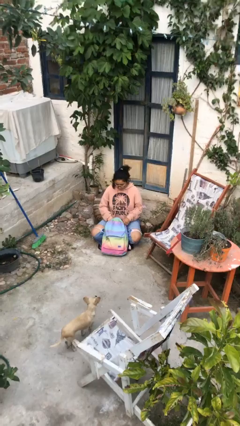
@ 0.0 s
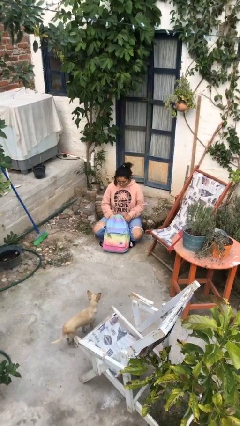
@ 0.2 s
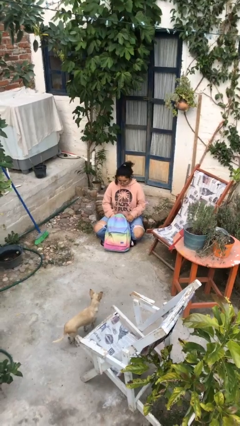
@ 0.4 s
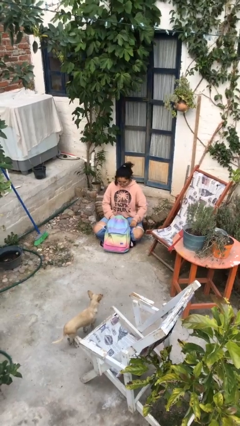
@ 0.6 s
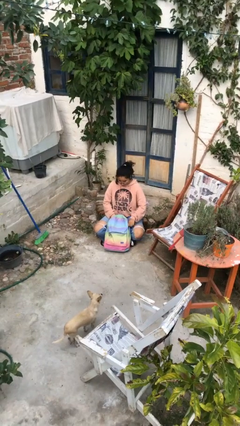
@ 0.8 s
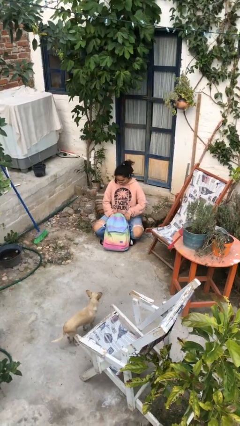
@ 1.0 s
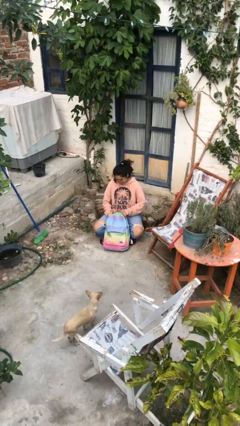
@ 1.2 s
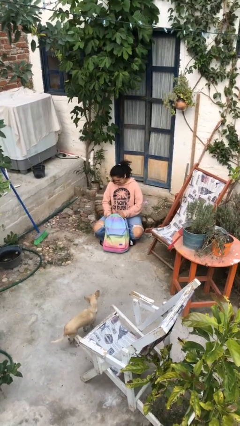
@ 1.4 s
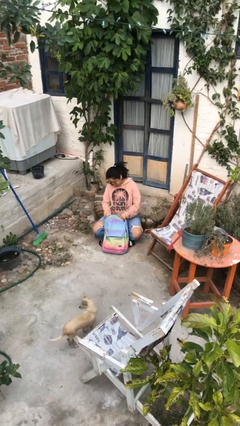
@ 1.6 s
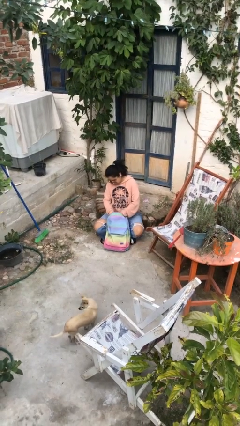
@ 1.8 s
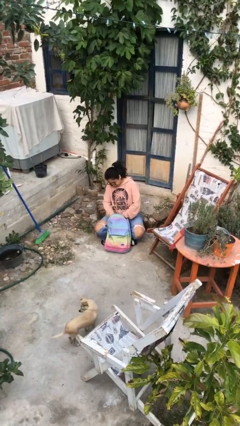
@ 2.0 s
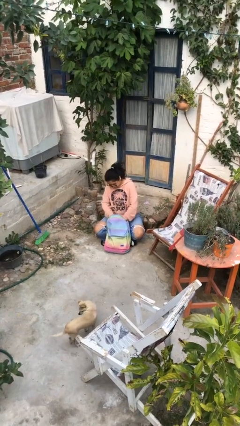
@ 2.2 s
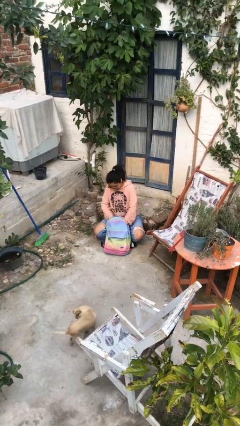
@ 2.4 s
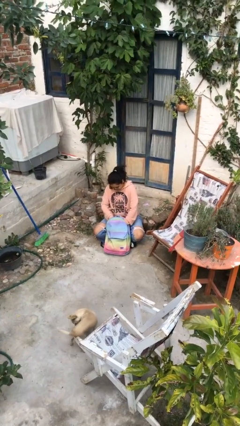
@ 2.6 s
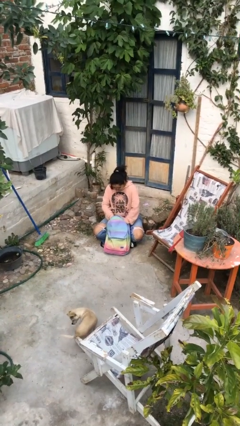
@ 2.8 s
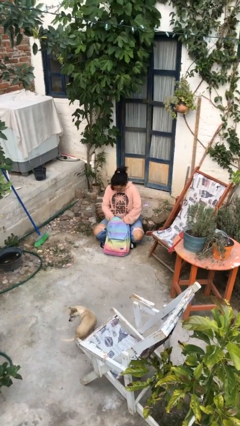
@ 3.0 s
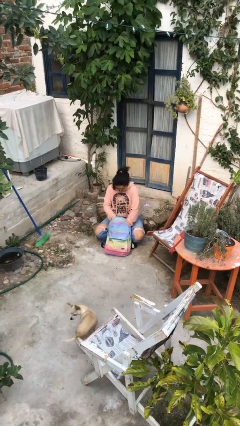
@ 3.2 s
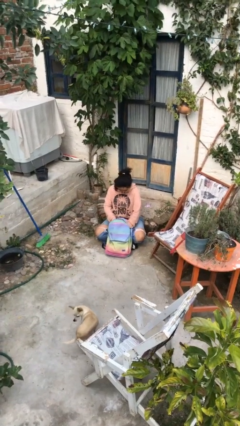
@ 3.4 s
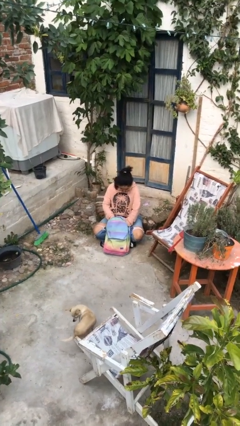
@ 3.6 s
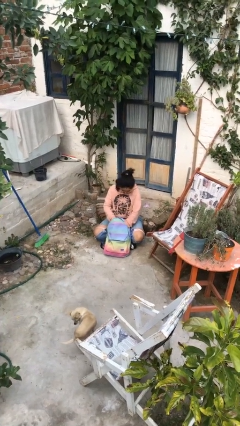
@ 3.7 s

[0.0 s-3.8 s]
person searches in backpack

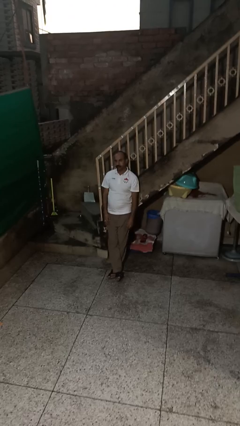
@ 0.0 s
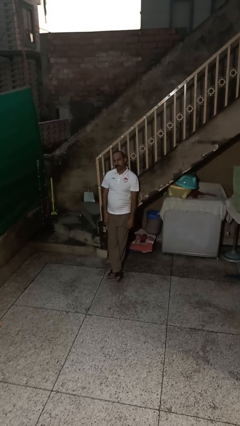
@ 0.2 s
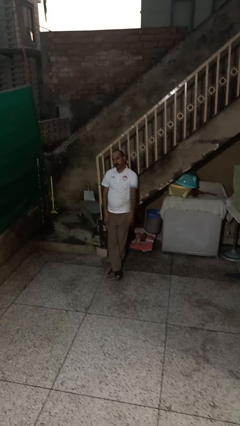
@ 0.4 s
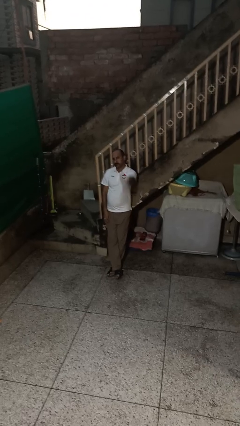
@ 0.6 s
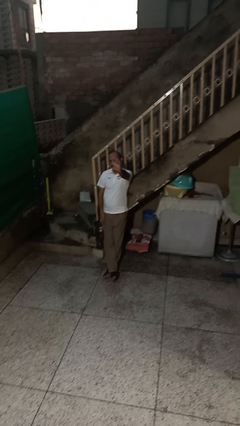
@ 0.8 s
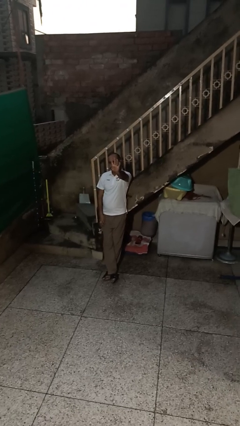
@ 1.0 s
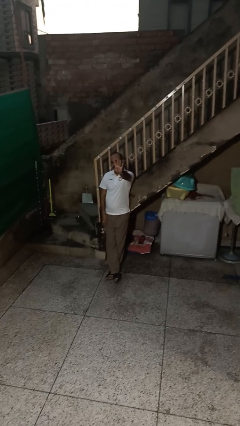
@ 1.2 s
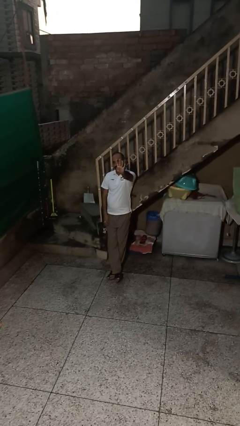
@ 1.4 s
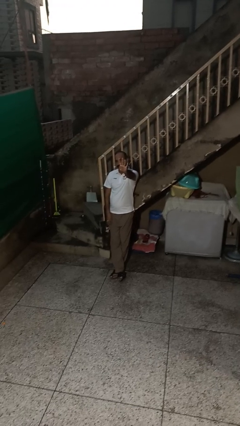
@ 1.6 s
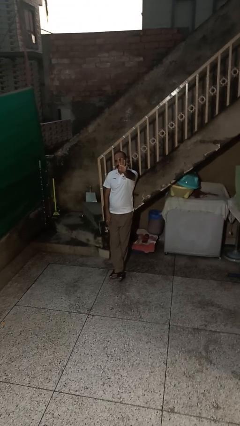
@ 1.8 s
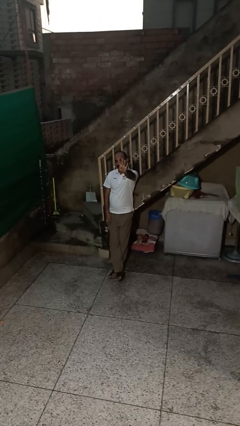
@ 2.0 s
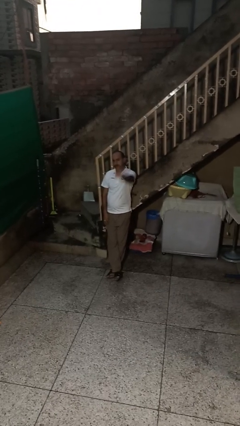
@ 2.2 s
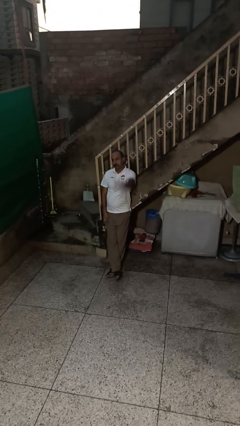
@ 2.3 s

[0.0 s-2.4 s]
person gestures number four

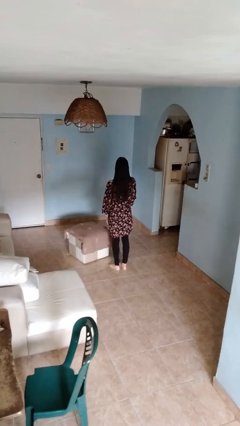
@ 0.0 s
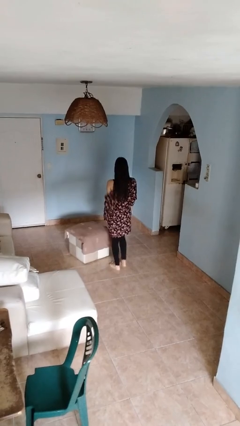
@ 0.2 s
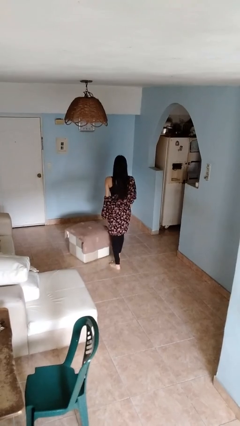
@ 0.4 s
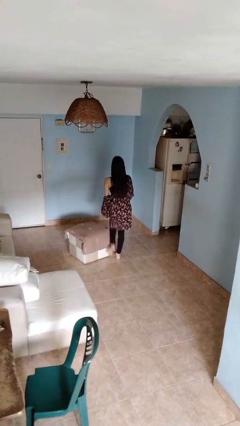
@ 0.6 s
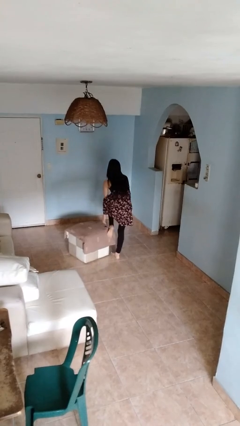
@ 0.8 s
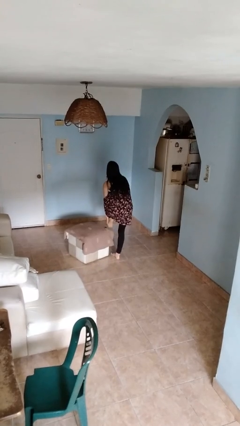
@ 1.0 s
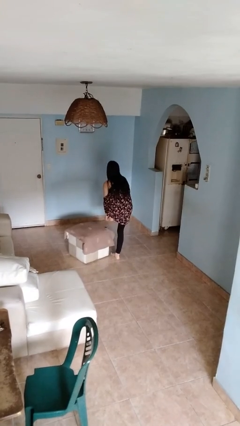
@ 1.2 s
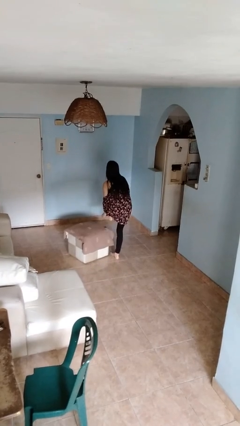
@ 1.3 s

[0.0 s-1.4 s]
person stubs toe

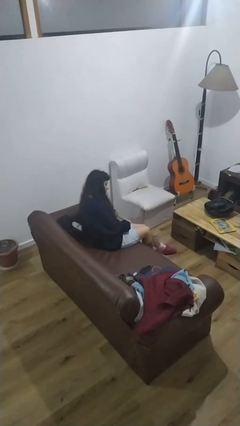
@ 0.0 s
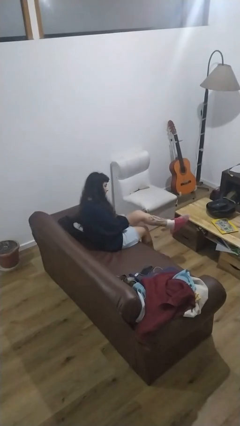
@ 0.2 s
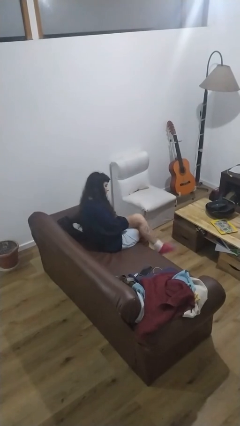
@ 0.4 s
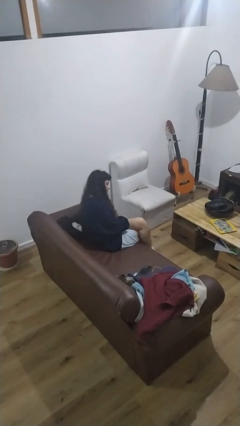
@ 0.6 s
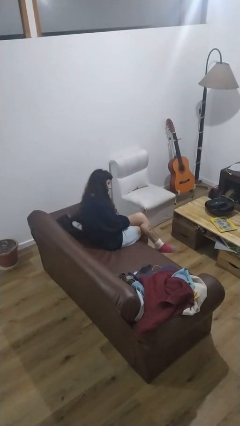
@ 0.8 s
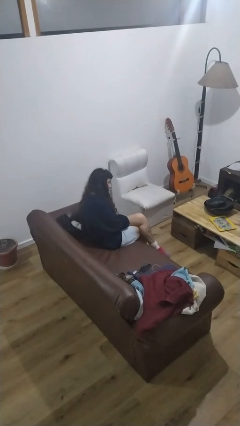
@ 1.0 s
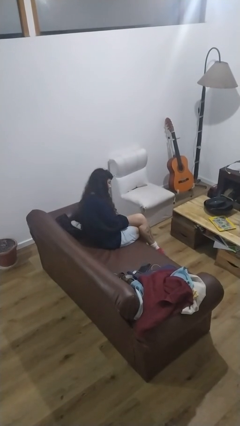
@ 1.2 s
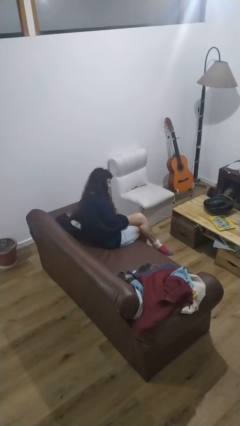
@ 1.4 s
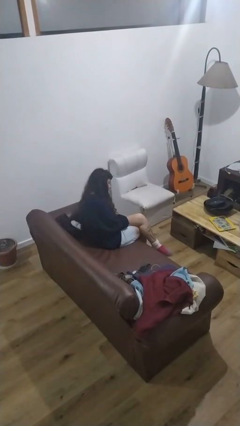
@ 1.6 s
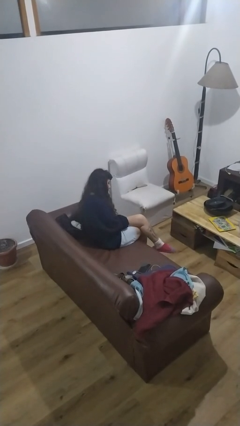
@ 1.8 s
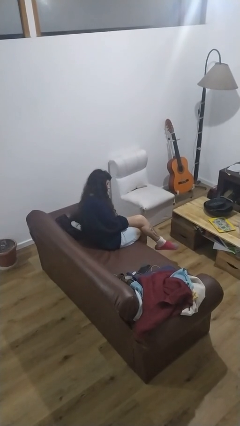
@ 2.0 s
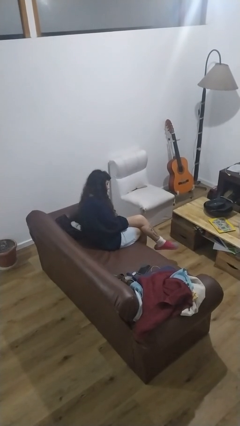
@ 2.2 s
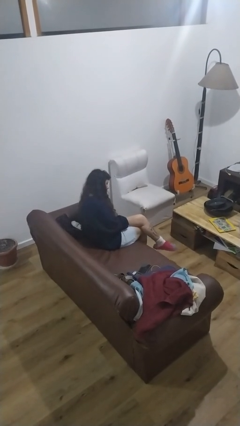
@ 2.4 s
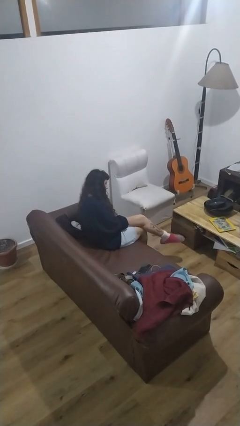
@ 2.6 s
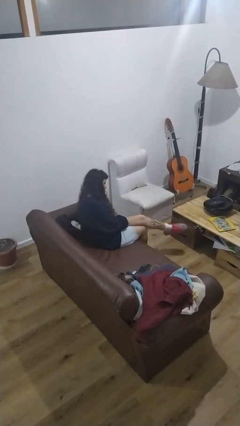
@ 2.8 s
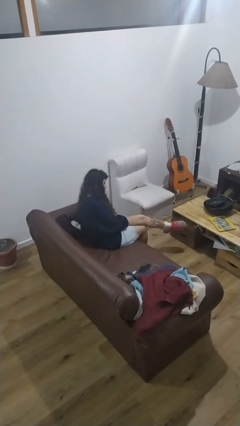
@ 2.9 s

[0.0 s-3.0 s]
person crosses legs

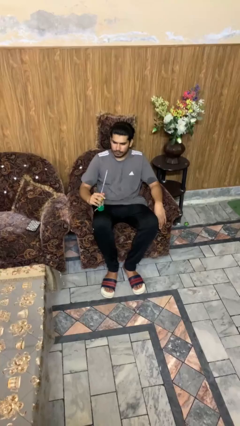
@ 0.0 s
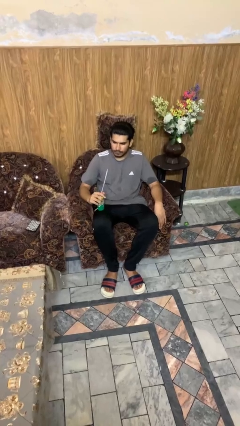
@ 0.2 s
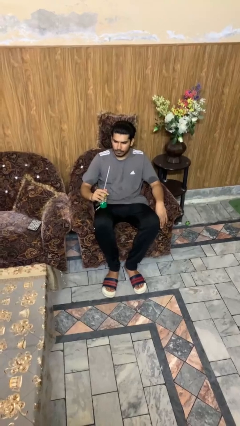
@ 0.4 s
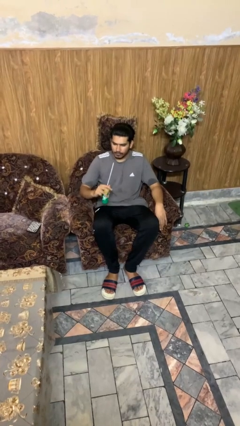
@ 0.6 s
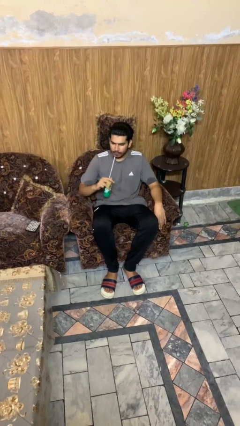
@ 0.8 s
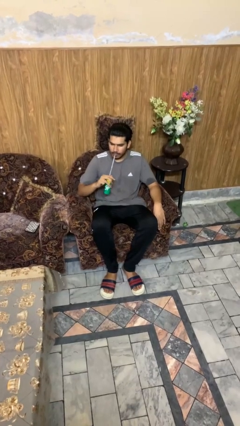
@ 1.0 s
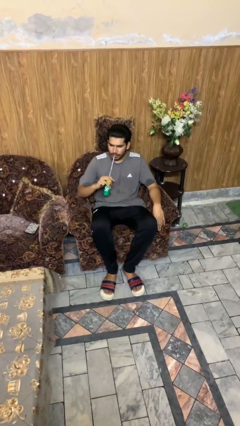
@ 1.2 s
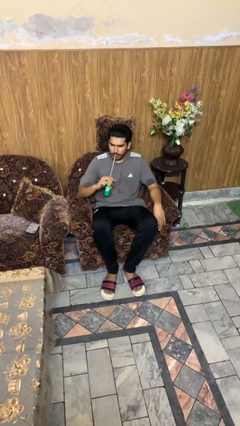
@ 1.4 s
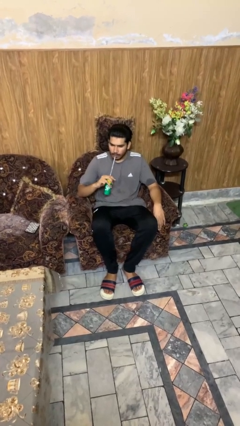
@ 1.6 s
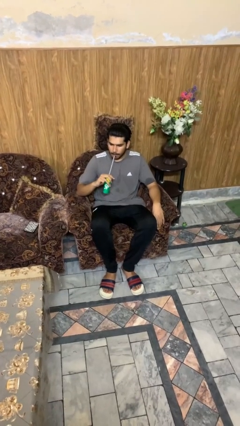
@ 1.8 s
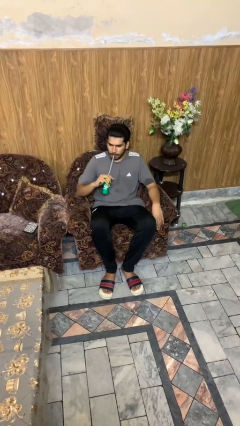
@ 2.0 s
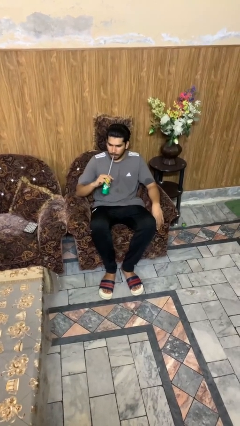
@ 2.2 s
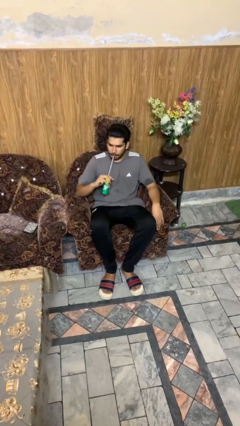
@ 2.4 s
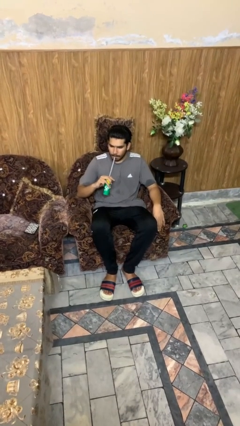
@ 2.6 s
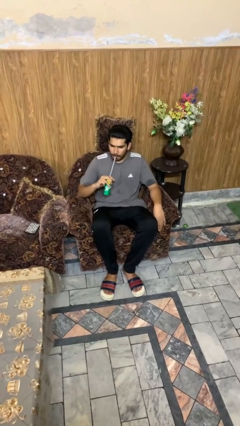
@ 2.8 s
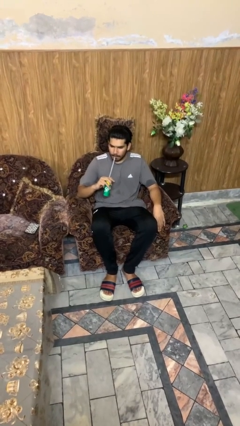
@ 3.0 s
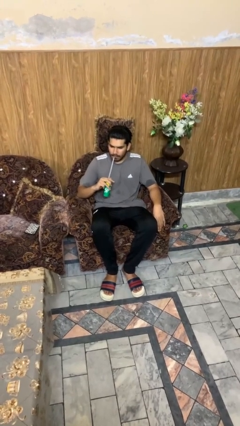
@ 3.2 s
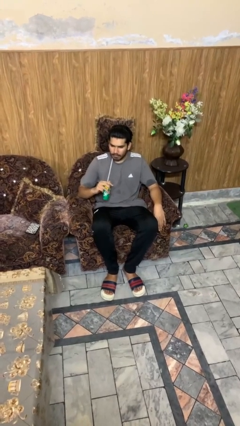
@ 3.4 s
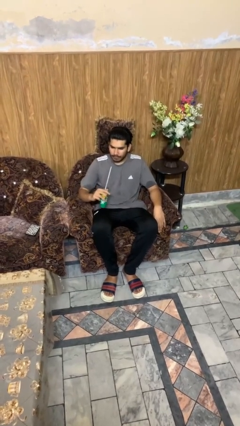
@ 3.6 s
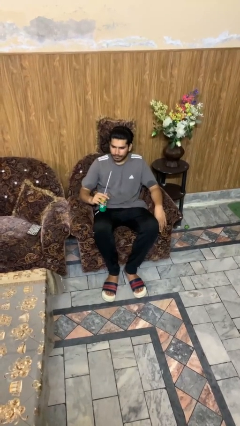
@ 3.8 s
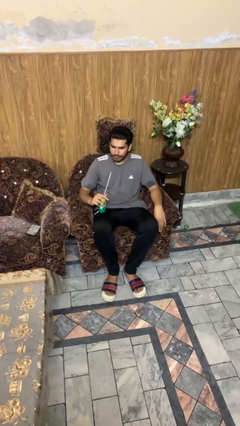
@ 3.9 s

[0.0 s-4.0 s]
person drinks from straw

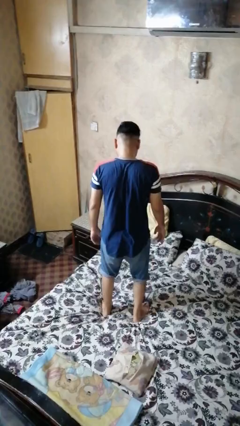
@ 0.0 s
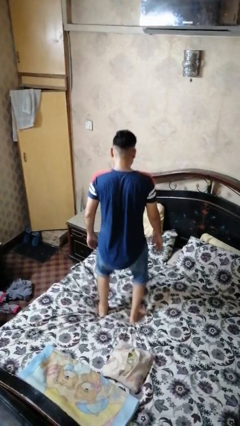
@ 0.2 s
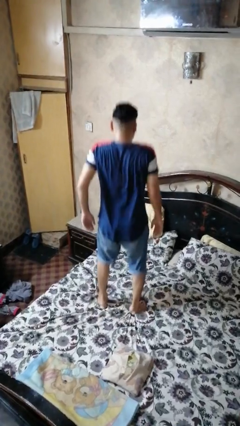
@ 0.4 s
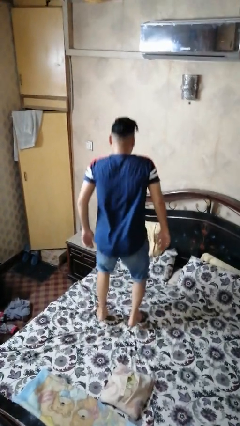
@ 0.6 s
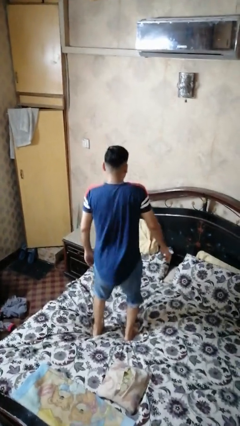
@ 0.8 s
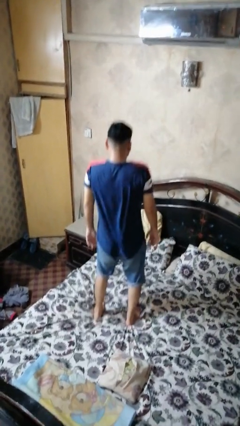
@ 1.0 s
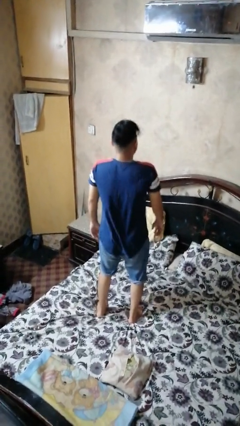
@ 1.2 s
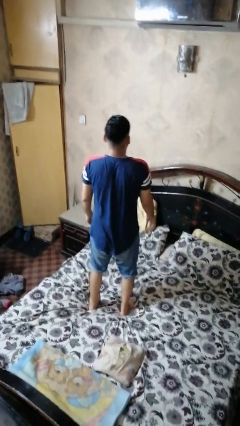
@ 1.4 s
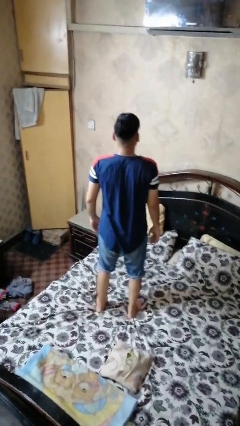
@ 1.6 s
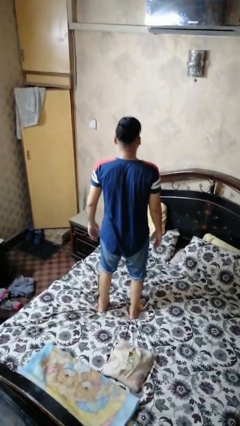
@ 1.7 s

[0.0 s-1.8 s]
person jumps on bed

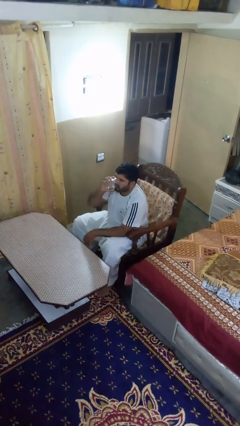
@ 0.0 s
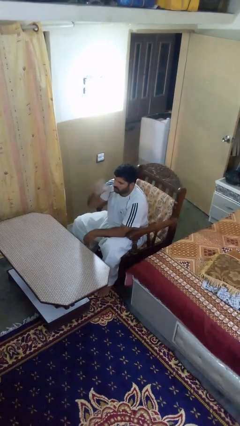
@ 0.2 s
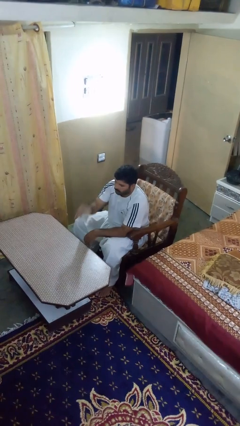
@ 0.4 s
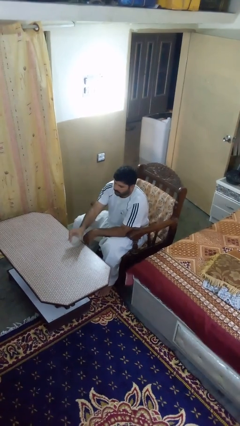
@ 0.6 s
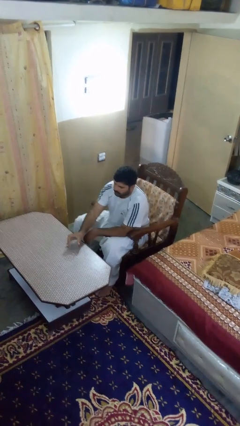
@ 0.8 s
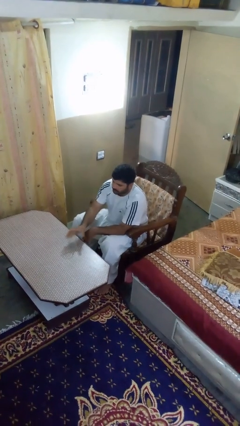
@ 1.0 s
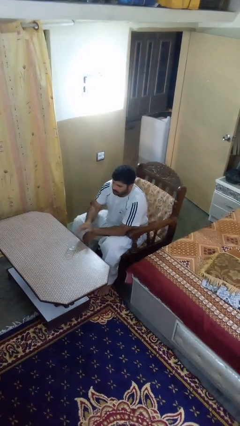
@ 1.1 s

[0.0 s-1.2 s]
person puts down object on table
